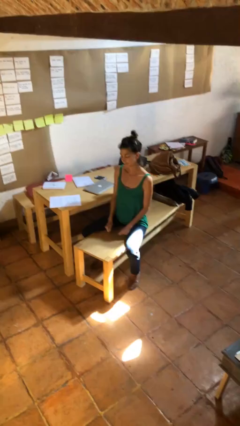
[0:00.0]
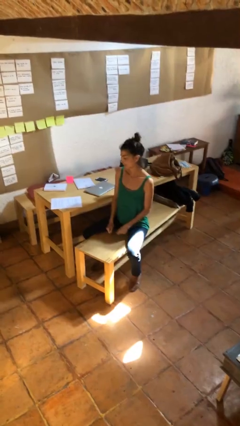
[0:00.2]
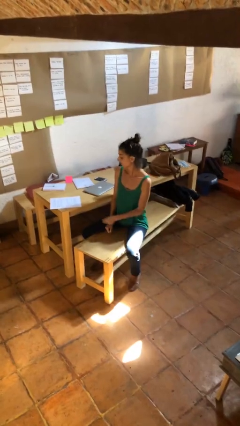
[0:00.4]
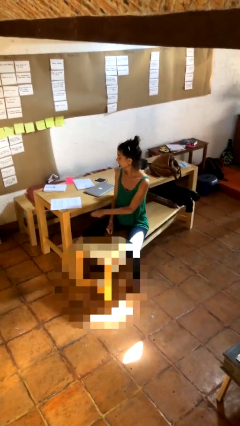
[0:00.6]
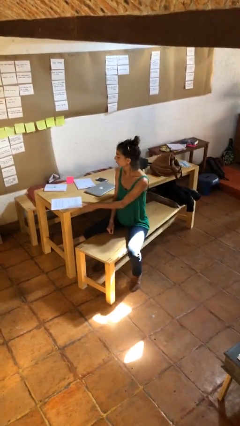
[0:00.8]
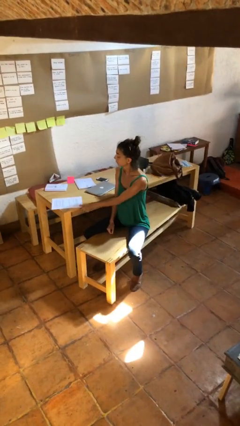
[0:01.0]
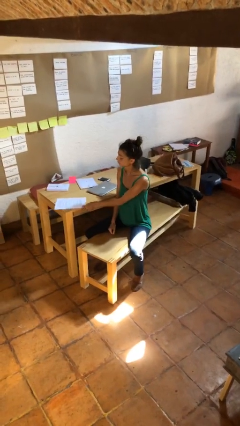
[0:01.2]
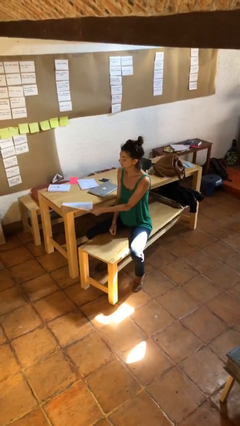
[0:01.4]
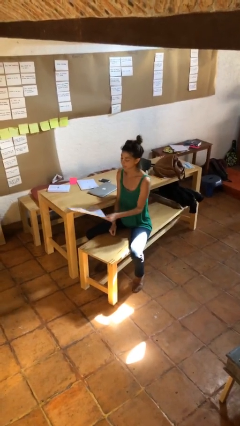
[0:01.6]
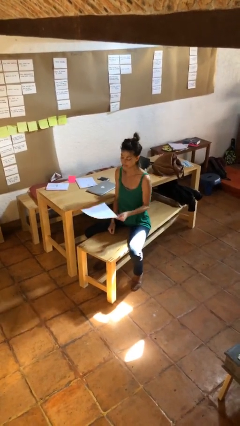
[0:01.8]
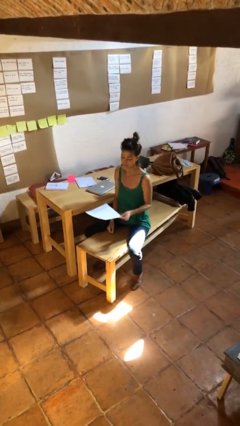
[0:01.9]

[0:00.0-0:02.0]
person picks up object from table

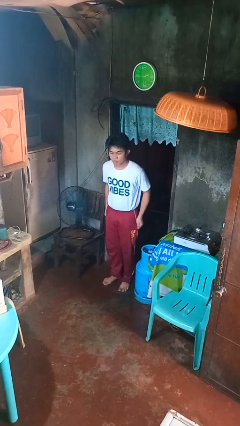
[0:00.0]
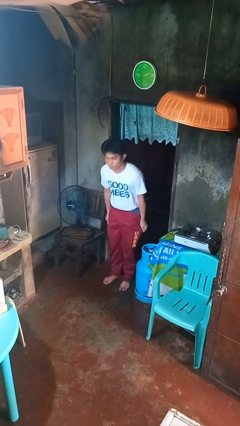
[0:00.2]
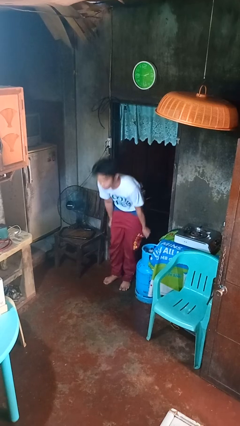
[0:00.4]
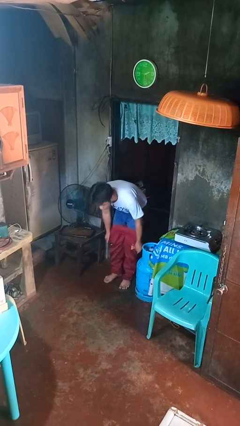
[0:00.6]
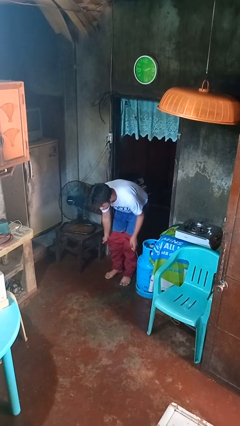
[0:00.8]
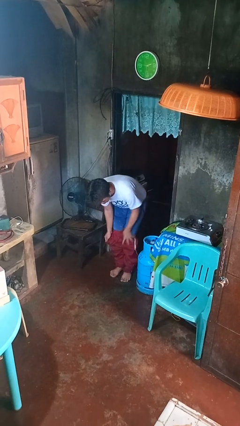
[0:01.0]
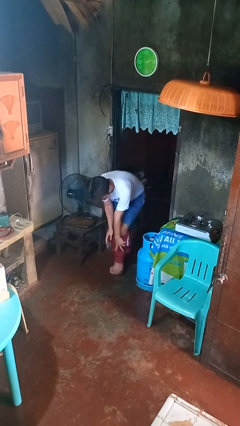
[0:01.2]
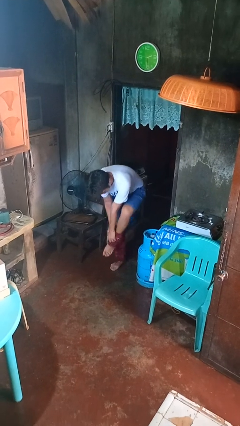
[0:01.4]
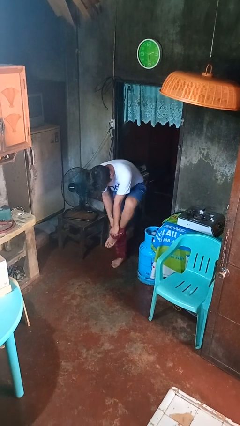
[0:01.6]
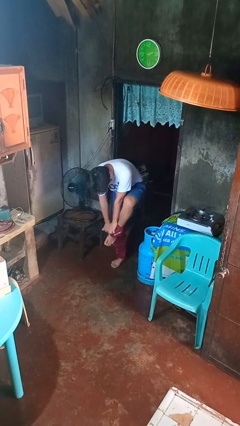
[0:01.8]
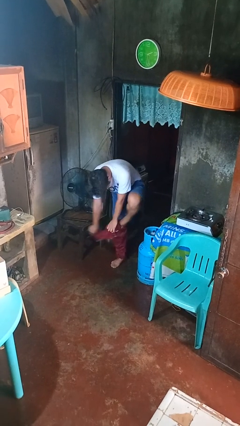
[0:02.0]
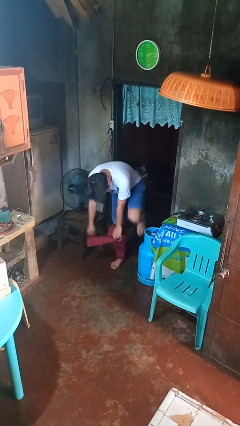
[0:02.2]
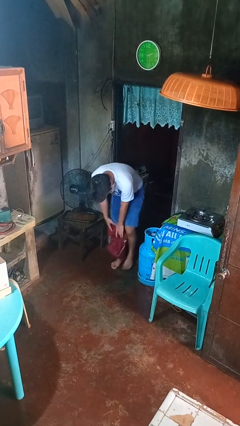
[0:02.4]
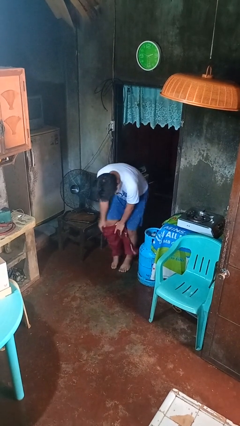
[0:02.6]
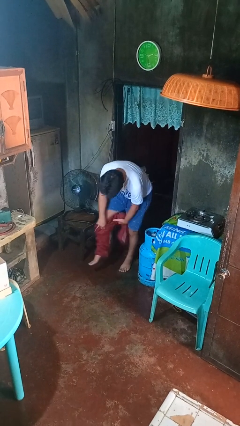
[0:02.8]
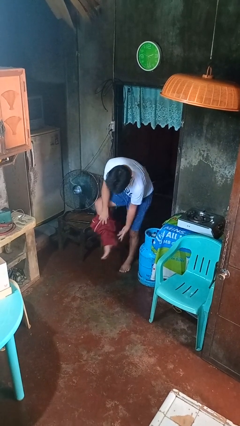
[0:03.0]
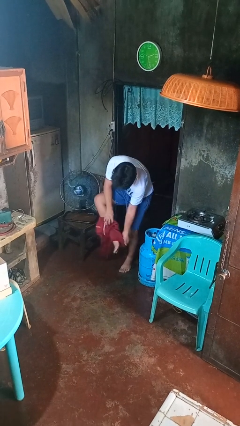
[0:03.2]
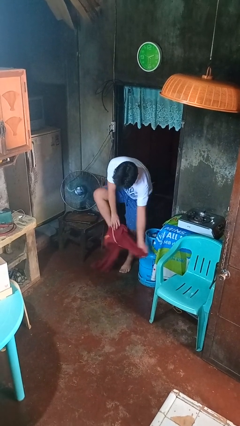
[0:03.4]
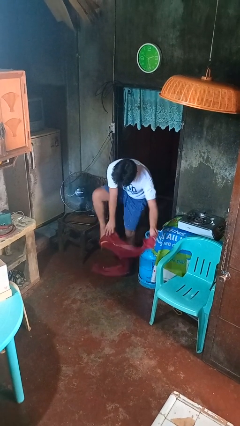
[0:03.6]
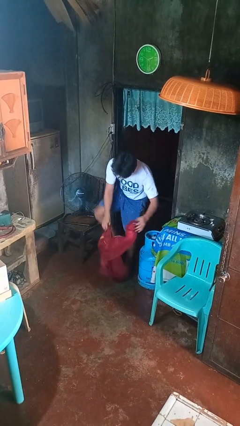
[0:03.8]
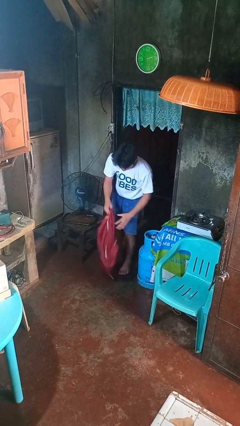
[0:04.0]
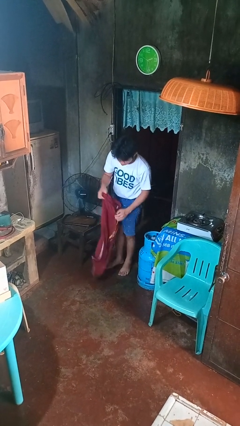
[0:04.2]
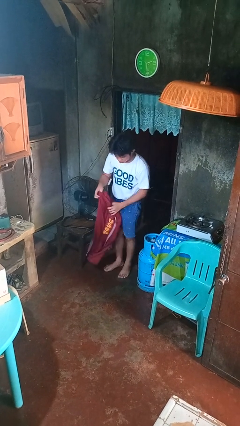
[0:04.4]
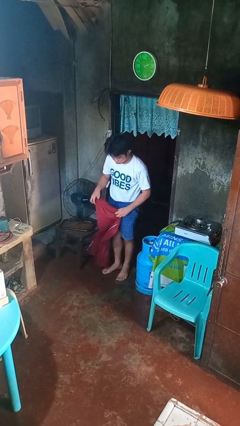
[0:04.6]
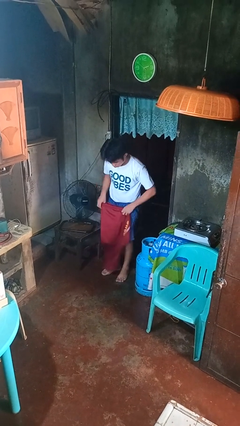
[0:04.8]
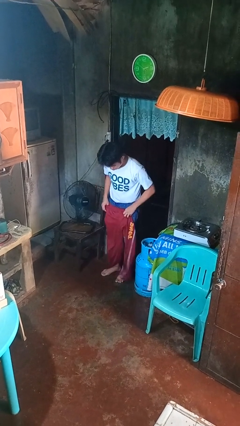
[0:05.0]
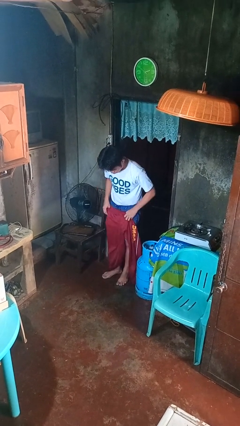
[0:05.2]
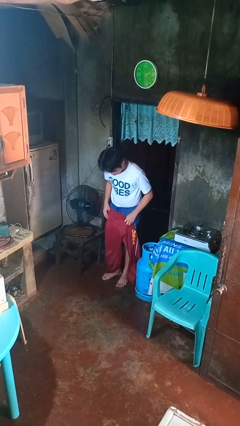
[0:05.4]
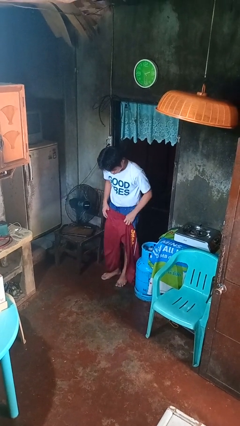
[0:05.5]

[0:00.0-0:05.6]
person takes off pants

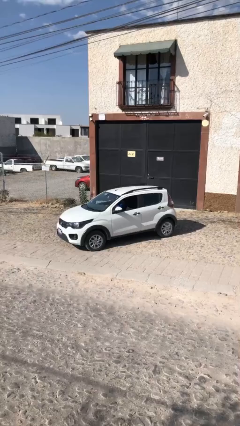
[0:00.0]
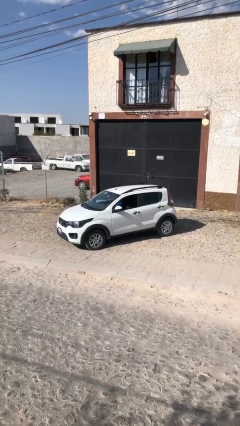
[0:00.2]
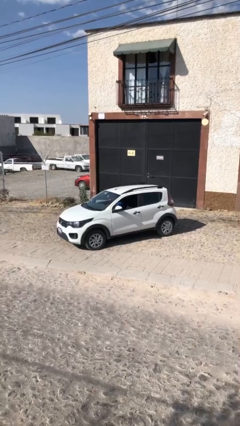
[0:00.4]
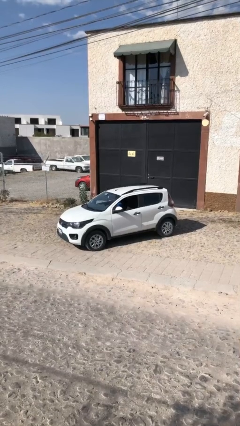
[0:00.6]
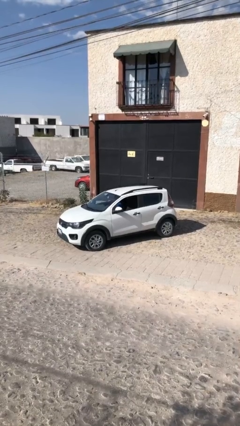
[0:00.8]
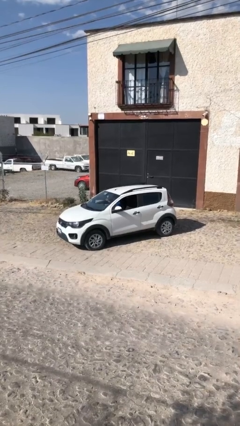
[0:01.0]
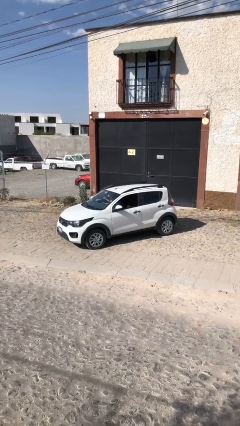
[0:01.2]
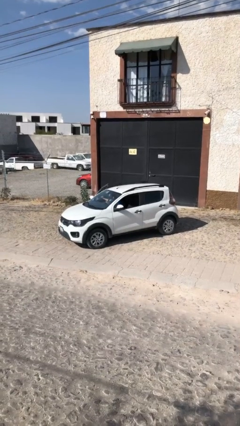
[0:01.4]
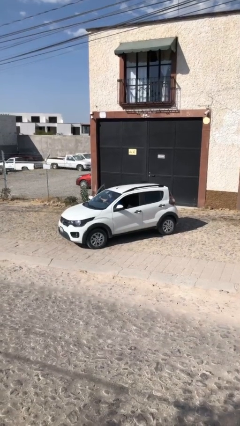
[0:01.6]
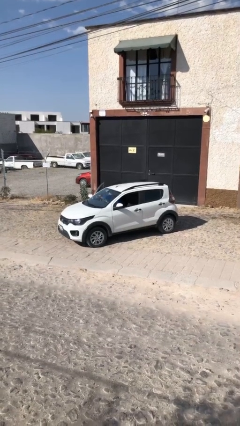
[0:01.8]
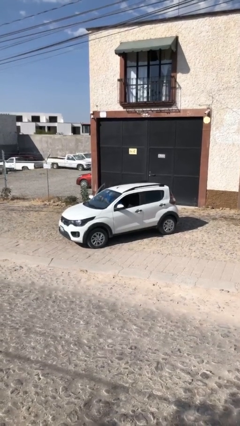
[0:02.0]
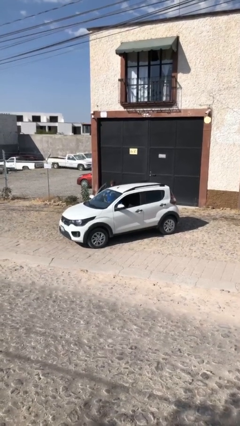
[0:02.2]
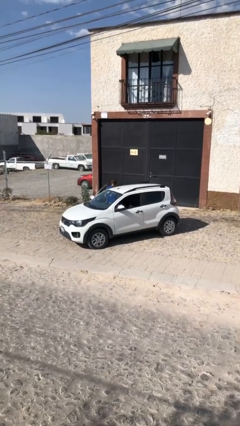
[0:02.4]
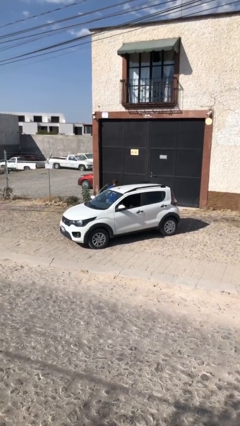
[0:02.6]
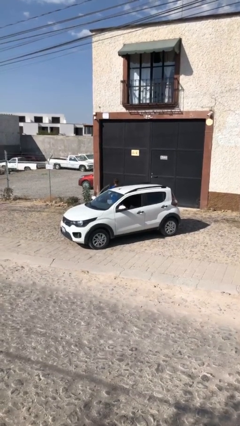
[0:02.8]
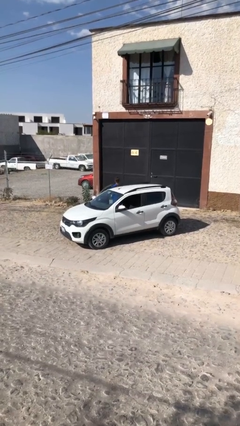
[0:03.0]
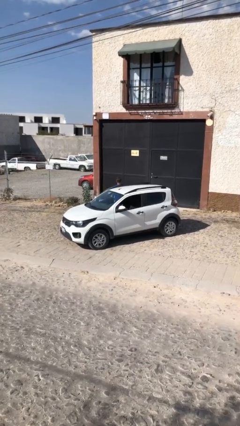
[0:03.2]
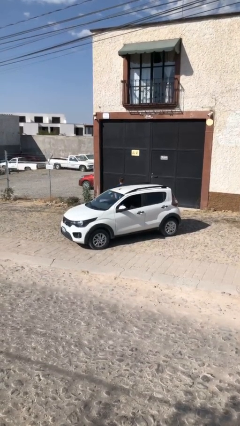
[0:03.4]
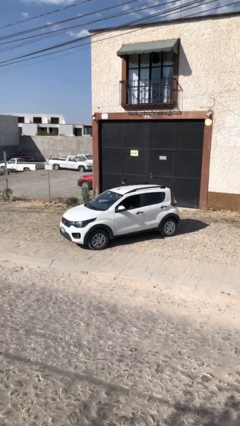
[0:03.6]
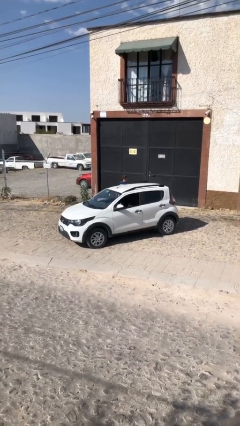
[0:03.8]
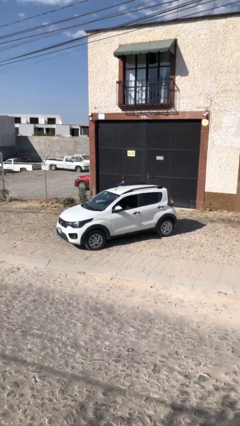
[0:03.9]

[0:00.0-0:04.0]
car drops off person

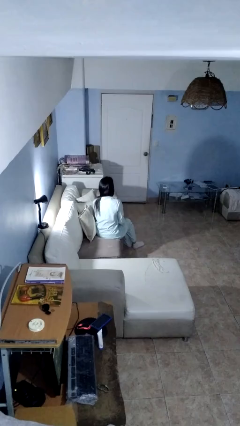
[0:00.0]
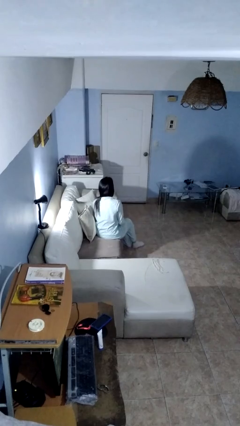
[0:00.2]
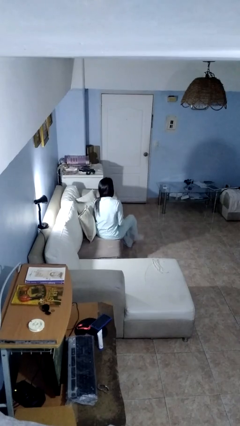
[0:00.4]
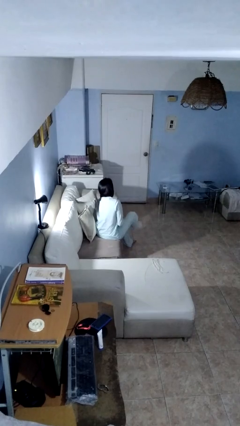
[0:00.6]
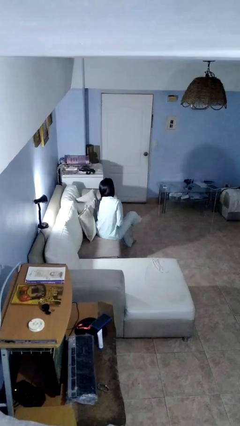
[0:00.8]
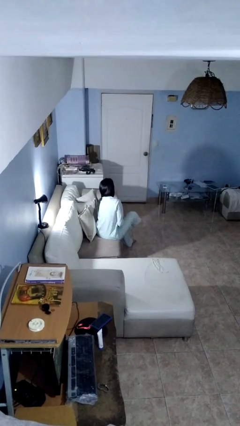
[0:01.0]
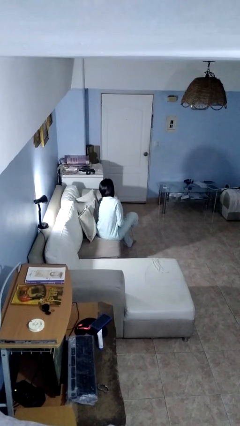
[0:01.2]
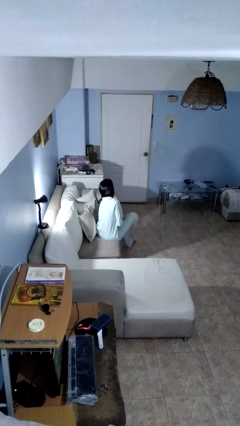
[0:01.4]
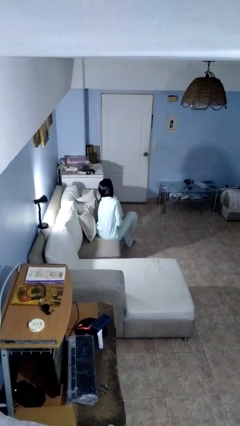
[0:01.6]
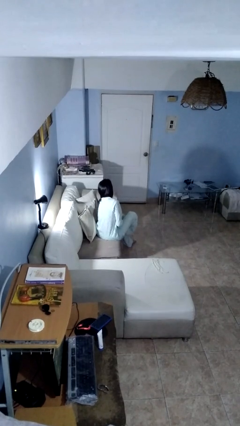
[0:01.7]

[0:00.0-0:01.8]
person takes off socks

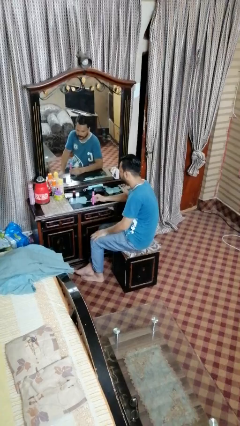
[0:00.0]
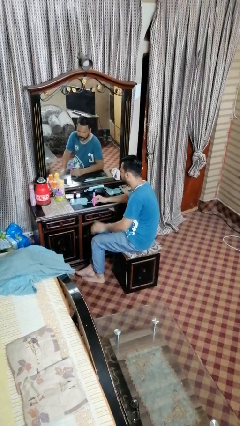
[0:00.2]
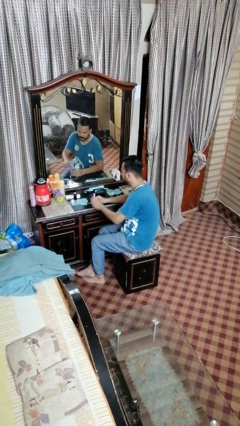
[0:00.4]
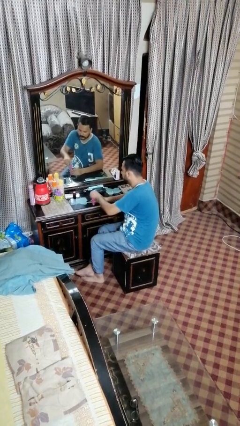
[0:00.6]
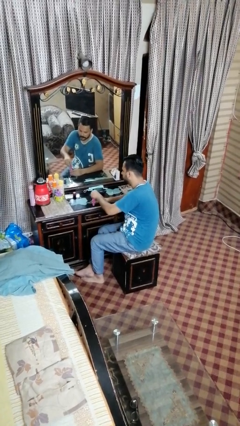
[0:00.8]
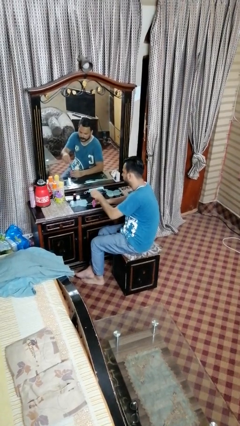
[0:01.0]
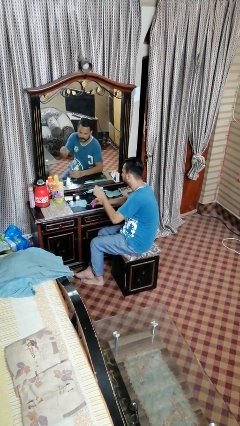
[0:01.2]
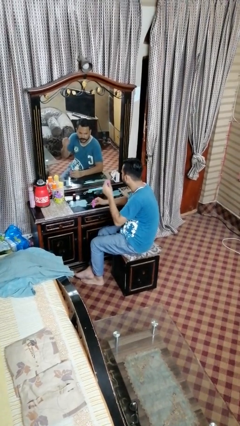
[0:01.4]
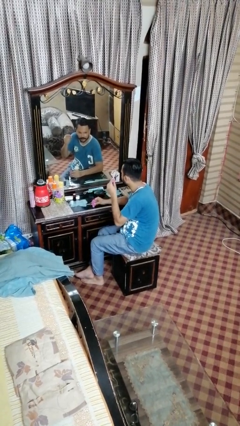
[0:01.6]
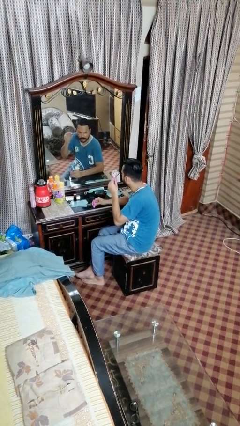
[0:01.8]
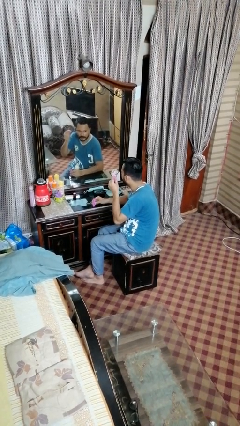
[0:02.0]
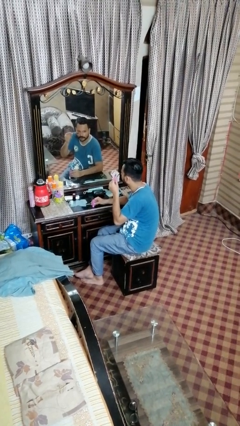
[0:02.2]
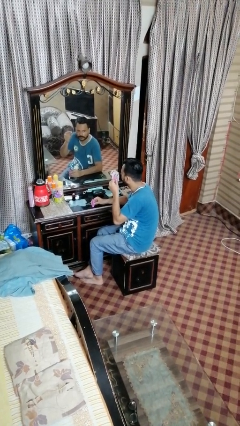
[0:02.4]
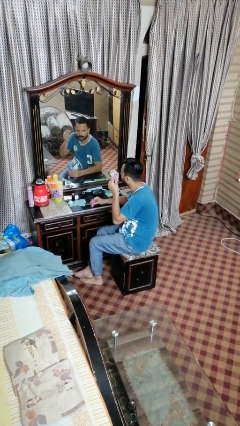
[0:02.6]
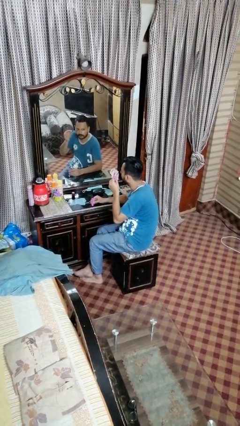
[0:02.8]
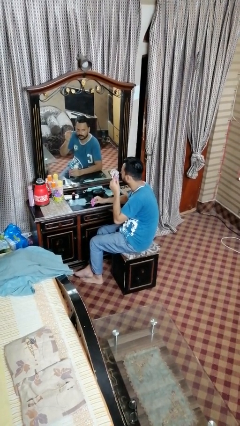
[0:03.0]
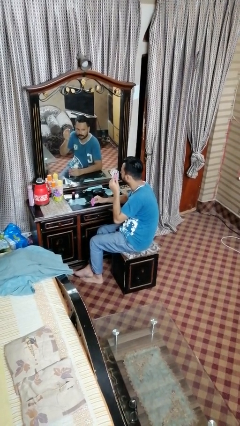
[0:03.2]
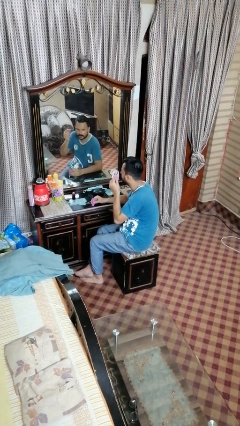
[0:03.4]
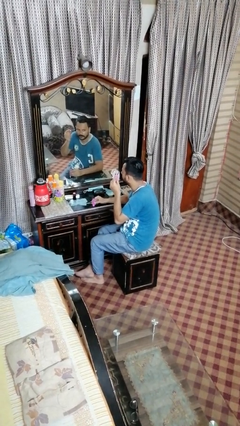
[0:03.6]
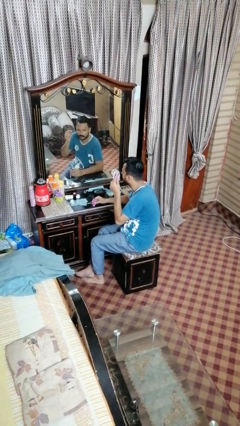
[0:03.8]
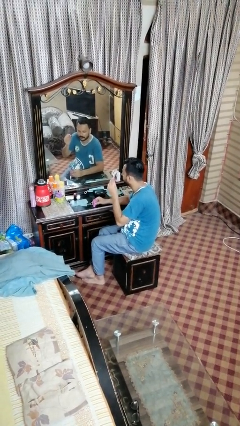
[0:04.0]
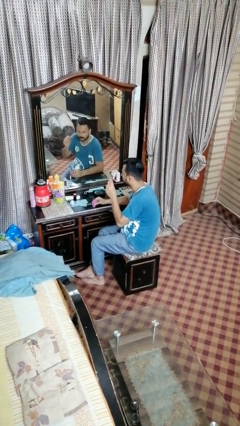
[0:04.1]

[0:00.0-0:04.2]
person applies eye makeup
